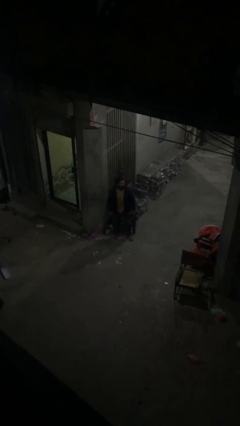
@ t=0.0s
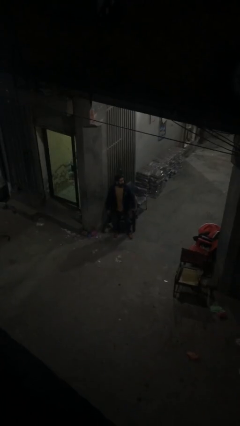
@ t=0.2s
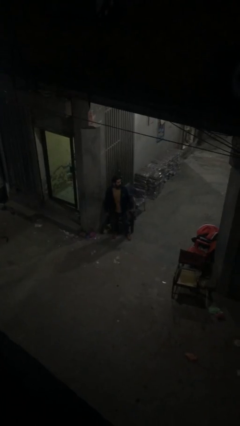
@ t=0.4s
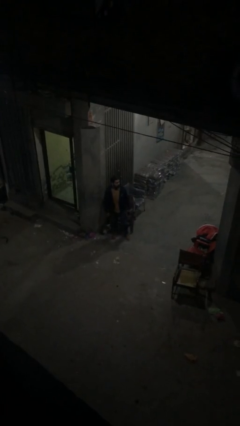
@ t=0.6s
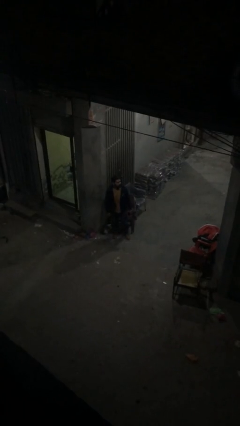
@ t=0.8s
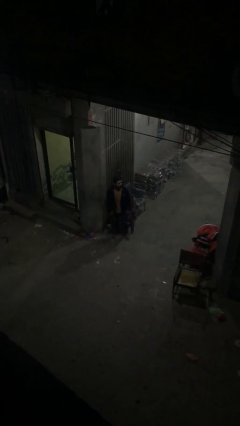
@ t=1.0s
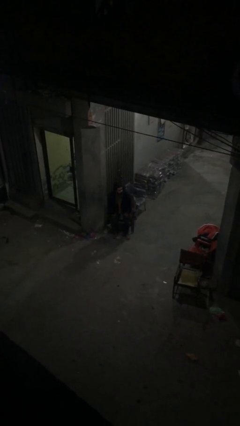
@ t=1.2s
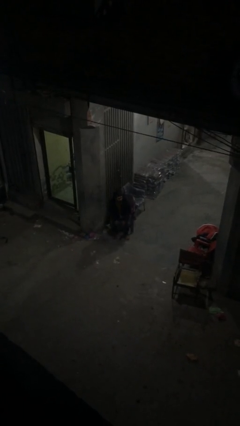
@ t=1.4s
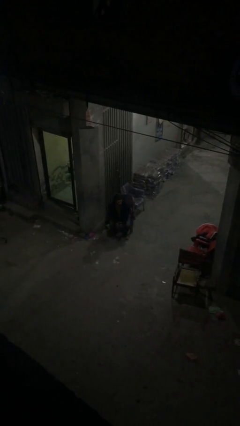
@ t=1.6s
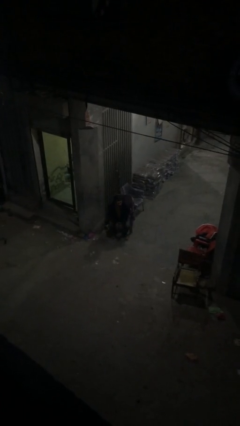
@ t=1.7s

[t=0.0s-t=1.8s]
person sits down

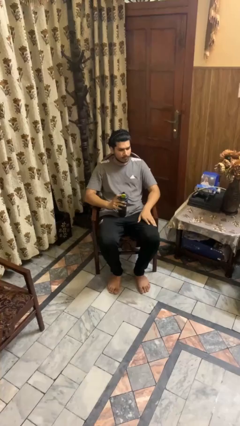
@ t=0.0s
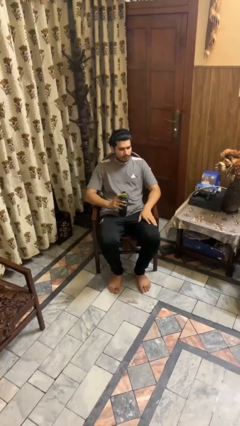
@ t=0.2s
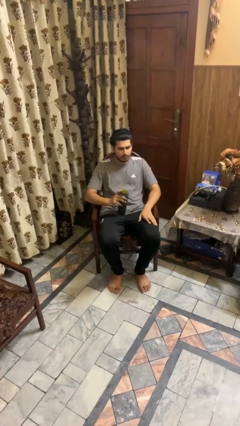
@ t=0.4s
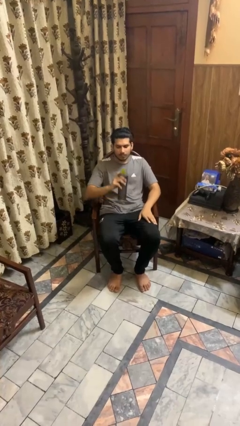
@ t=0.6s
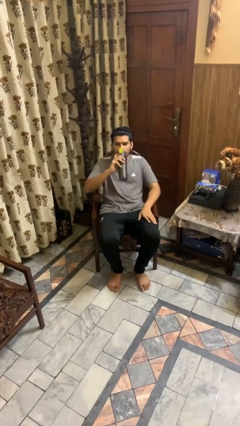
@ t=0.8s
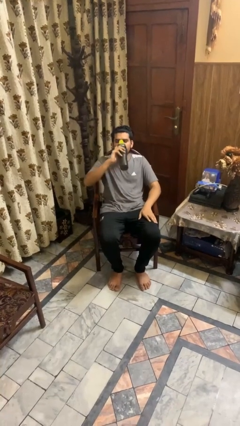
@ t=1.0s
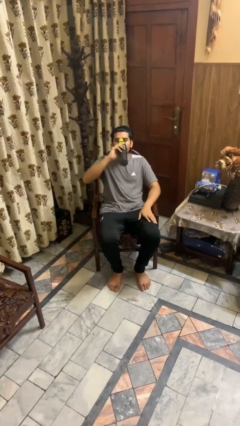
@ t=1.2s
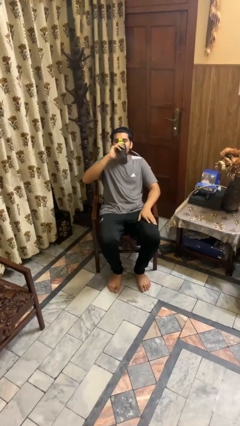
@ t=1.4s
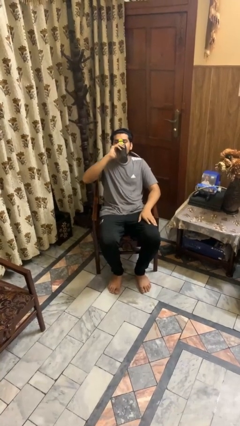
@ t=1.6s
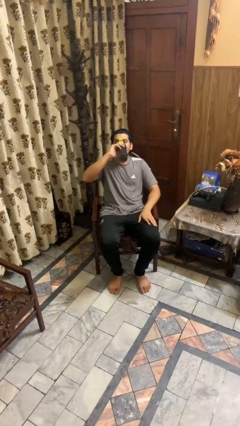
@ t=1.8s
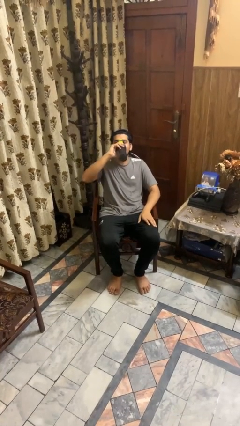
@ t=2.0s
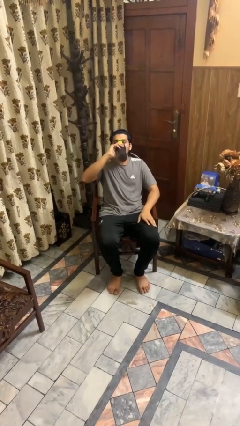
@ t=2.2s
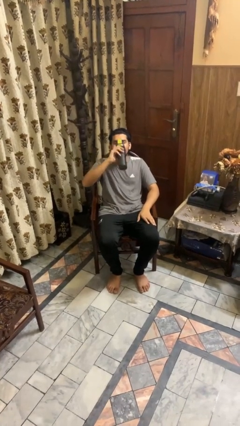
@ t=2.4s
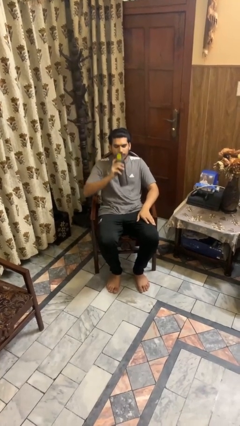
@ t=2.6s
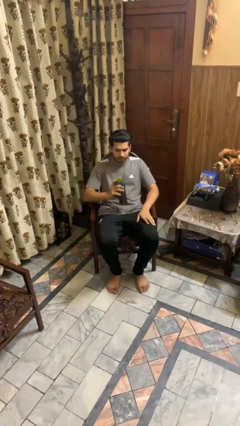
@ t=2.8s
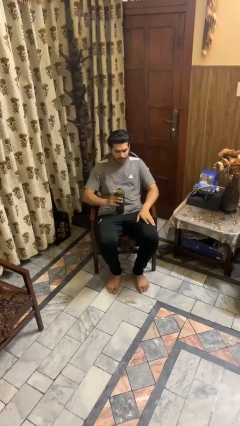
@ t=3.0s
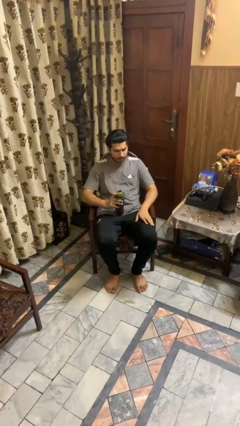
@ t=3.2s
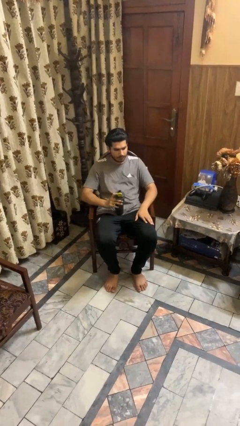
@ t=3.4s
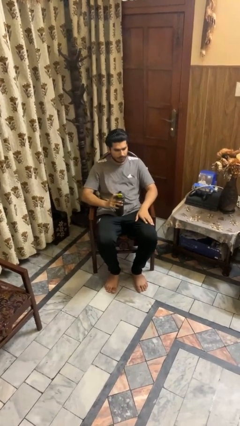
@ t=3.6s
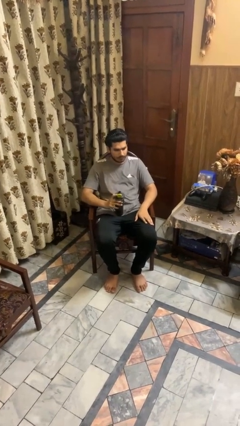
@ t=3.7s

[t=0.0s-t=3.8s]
person drinks from bottle

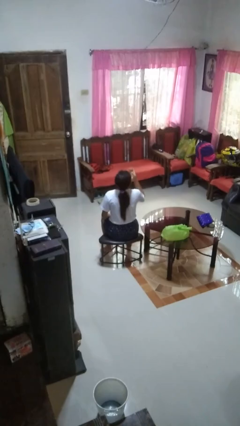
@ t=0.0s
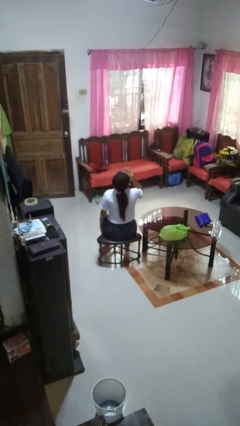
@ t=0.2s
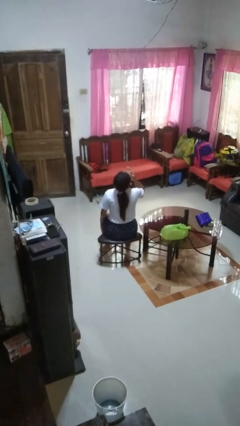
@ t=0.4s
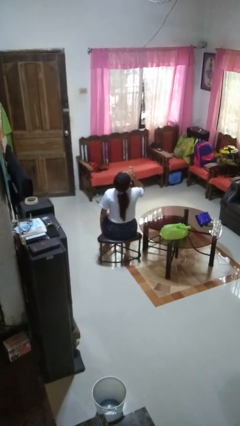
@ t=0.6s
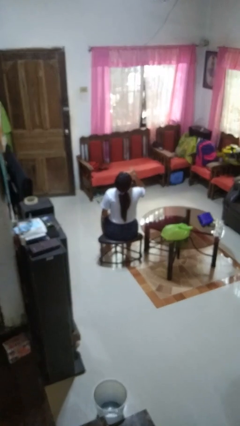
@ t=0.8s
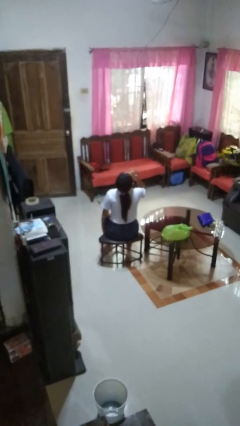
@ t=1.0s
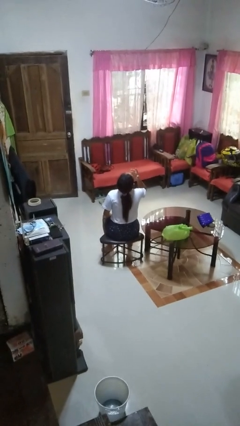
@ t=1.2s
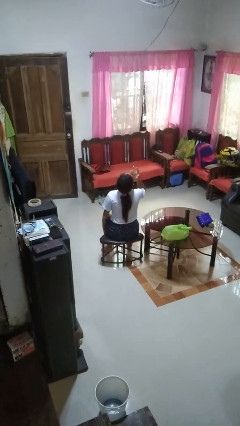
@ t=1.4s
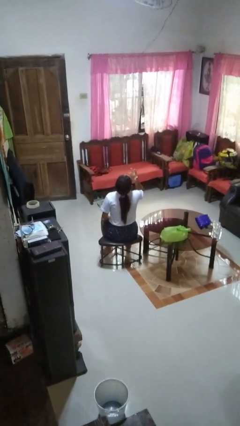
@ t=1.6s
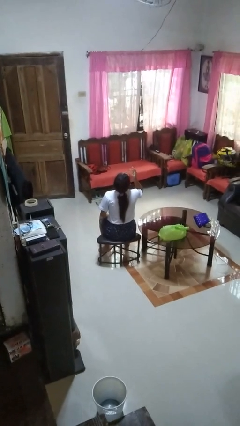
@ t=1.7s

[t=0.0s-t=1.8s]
person licks fingers

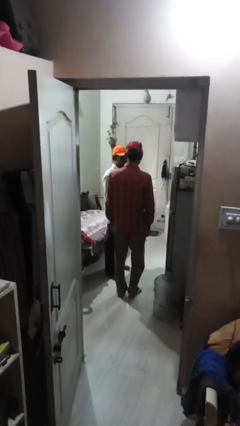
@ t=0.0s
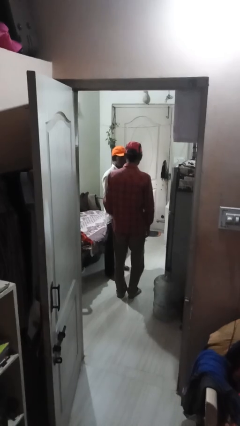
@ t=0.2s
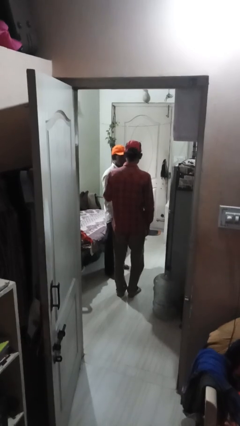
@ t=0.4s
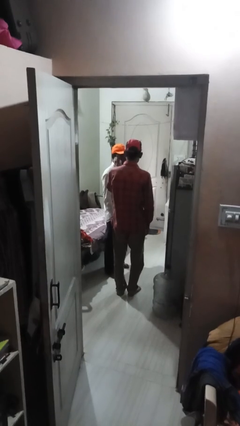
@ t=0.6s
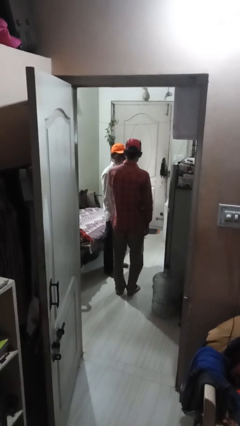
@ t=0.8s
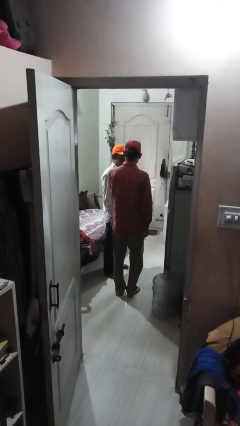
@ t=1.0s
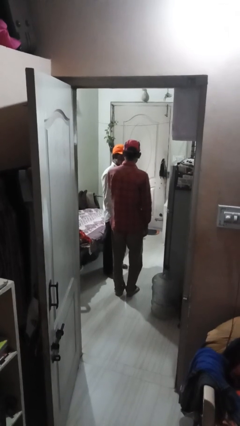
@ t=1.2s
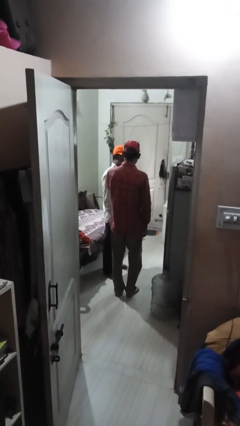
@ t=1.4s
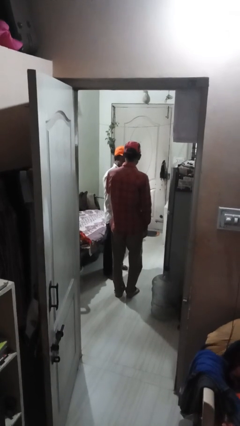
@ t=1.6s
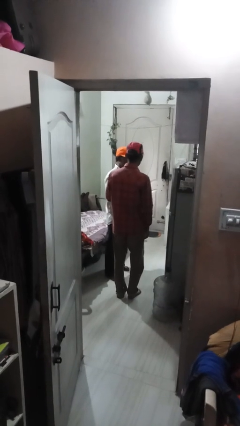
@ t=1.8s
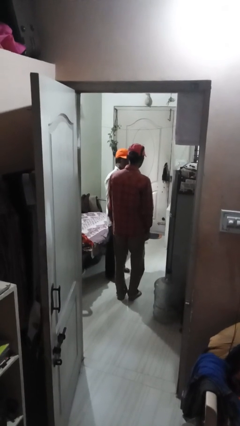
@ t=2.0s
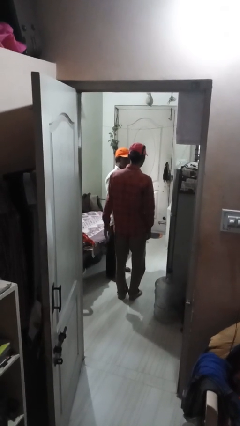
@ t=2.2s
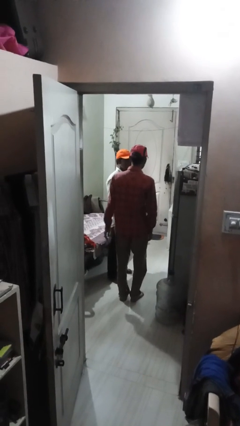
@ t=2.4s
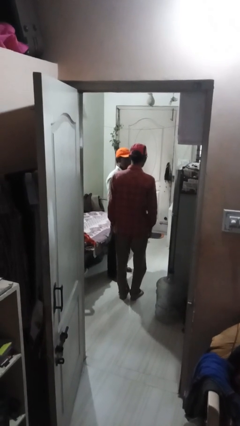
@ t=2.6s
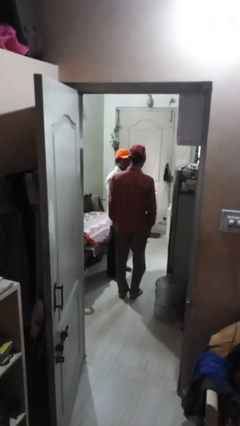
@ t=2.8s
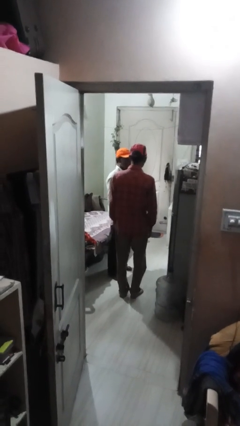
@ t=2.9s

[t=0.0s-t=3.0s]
person touches face of person

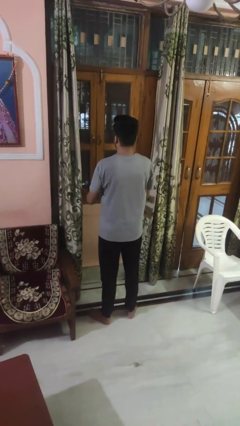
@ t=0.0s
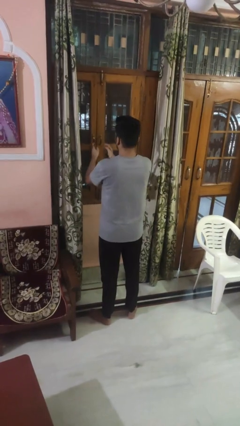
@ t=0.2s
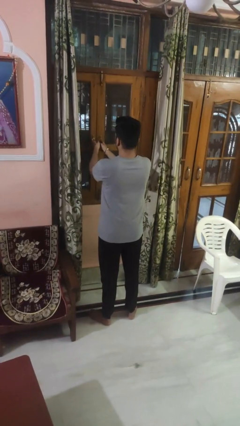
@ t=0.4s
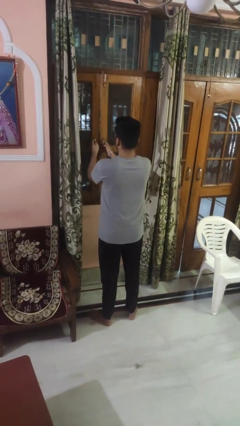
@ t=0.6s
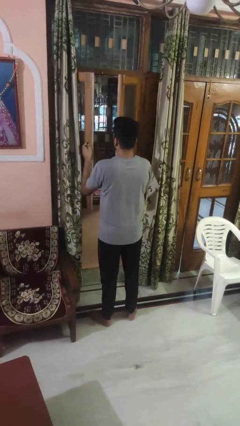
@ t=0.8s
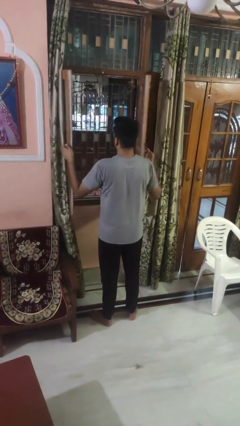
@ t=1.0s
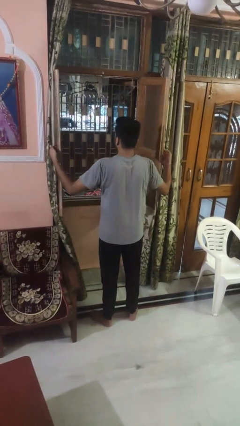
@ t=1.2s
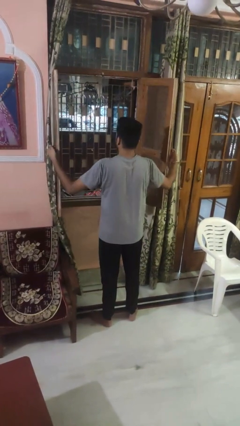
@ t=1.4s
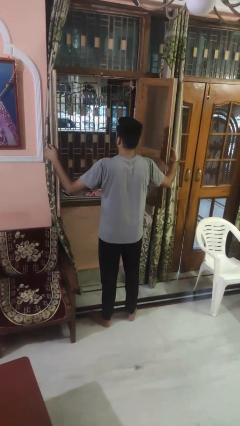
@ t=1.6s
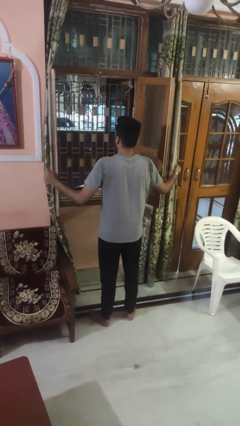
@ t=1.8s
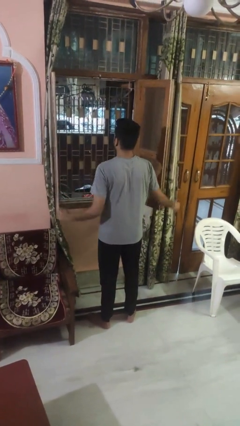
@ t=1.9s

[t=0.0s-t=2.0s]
person opens home window

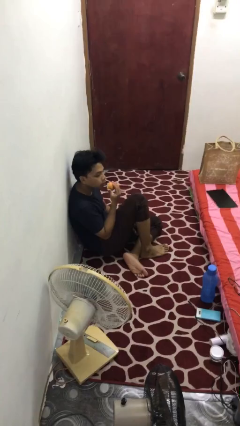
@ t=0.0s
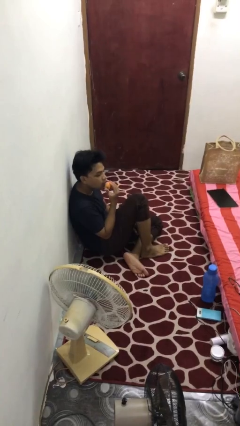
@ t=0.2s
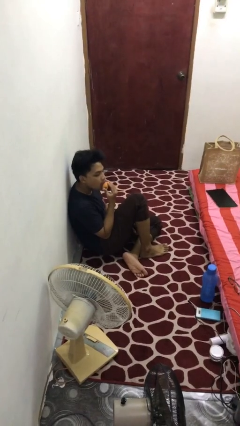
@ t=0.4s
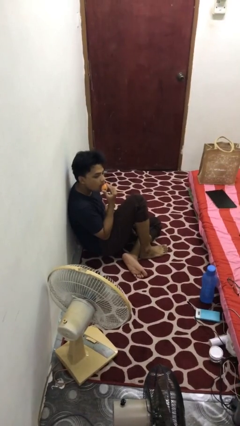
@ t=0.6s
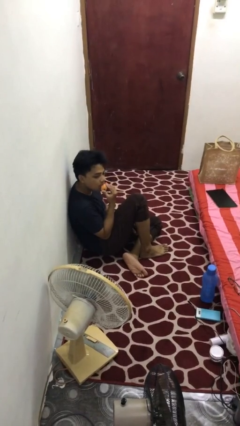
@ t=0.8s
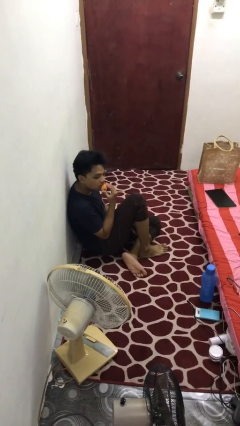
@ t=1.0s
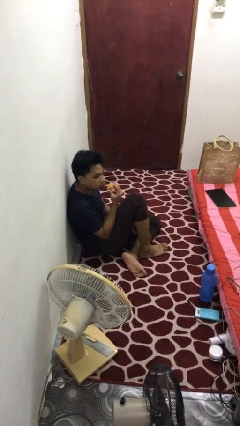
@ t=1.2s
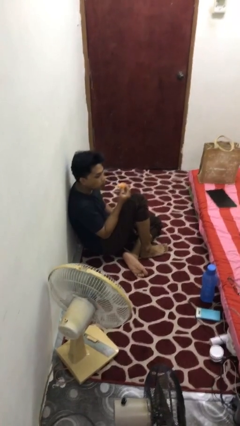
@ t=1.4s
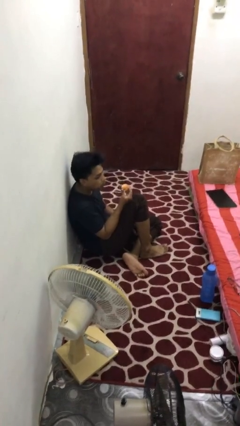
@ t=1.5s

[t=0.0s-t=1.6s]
person eats apple

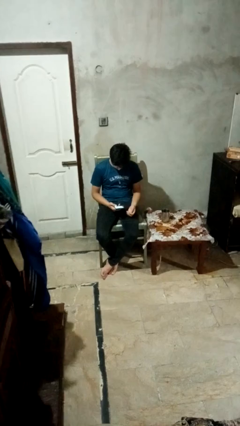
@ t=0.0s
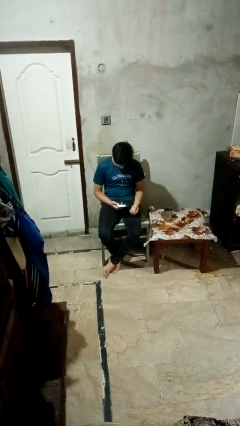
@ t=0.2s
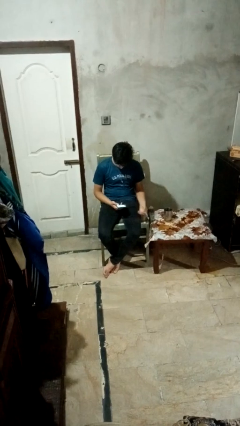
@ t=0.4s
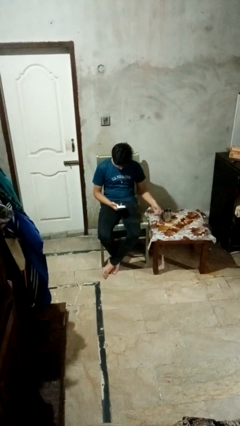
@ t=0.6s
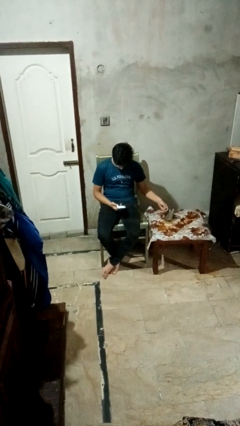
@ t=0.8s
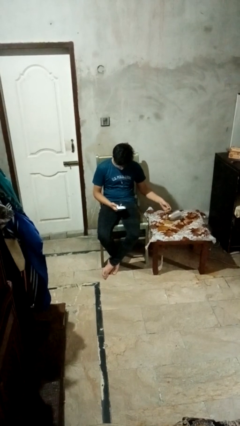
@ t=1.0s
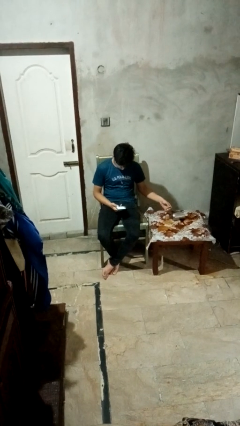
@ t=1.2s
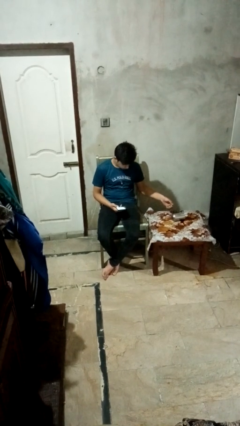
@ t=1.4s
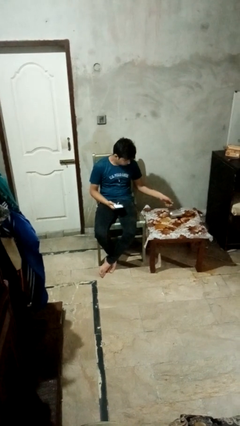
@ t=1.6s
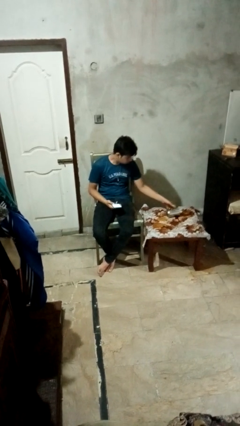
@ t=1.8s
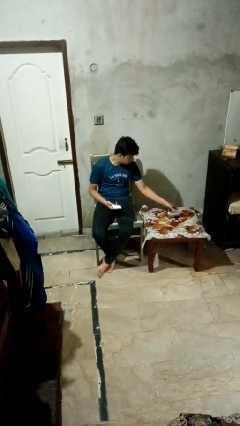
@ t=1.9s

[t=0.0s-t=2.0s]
person spills on table

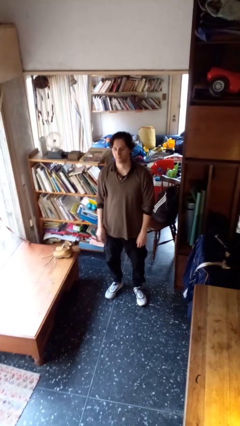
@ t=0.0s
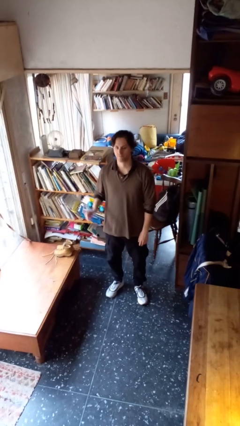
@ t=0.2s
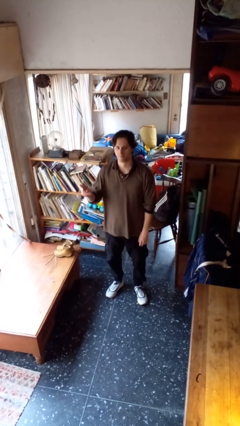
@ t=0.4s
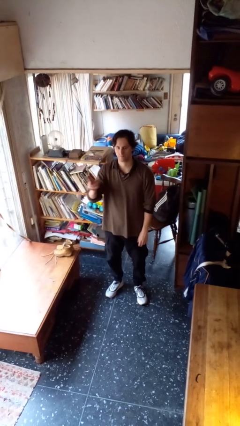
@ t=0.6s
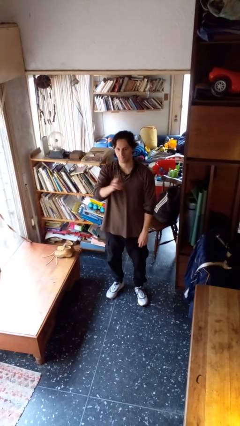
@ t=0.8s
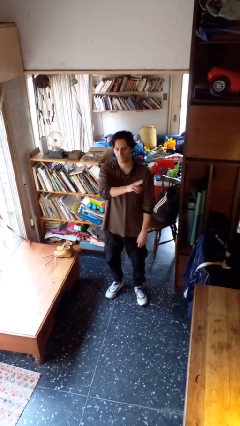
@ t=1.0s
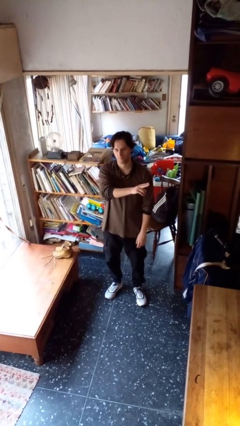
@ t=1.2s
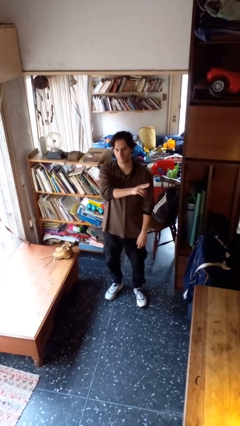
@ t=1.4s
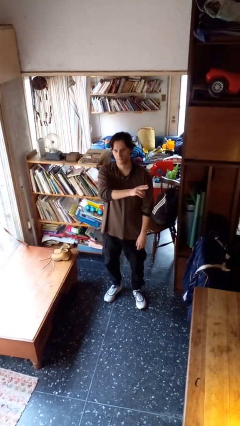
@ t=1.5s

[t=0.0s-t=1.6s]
person gestures swipe left
